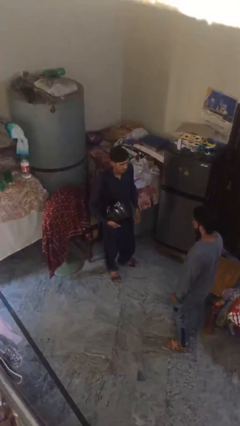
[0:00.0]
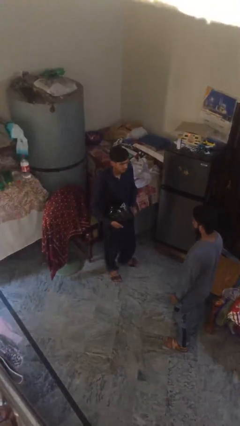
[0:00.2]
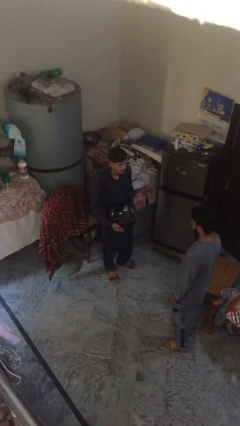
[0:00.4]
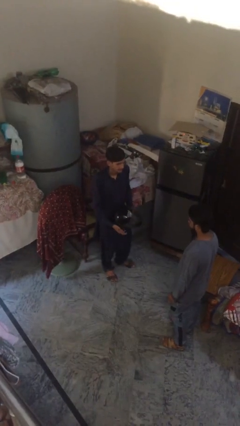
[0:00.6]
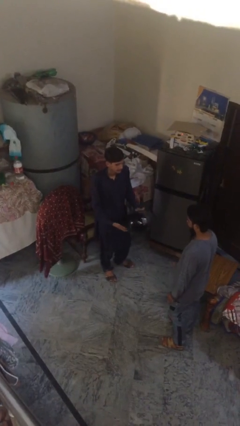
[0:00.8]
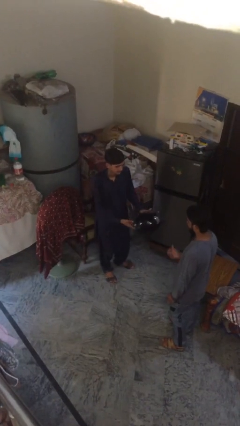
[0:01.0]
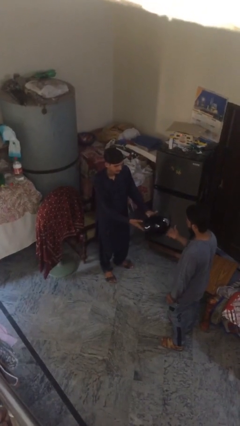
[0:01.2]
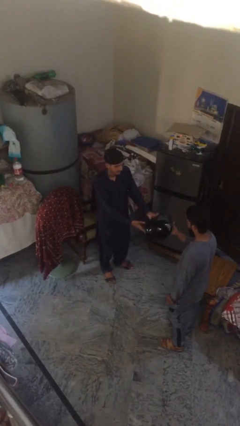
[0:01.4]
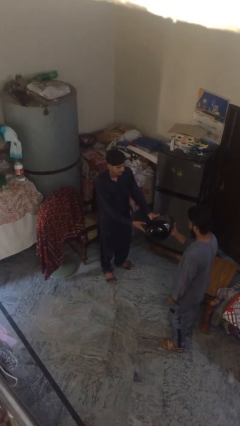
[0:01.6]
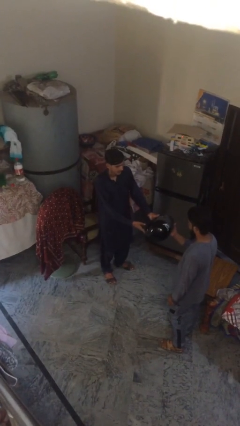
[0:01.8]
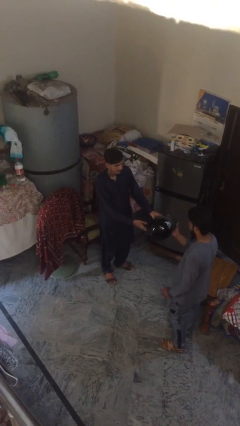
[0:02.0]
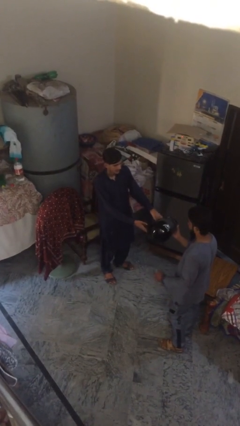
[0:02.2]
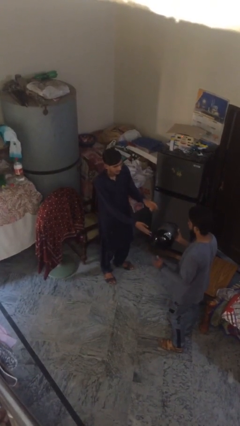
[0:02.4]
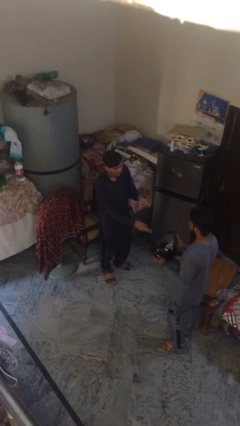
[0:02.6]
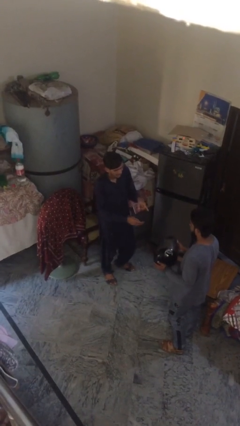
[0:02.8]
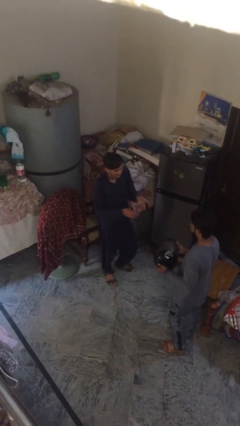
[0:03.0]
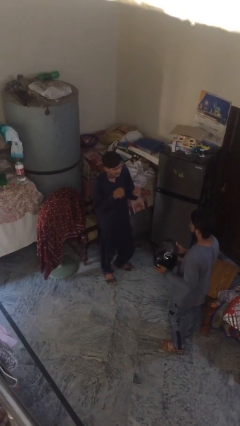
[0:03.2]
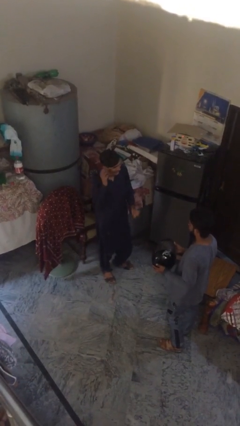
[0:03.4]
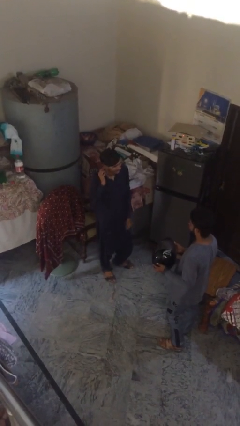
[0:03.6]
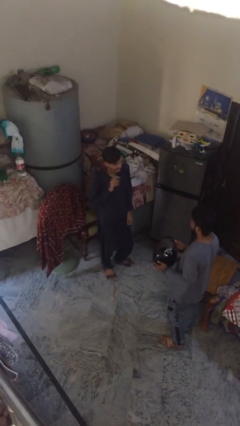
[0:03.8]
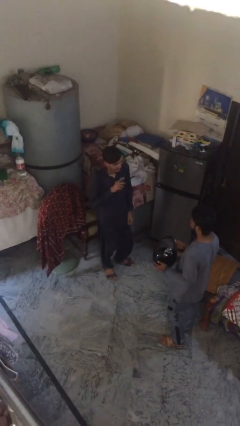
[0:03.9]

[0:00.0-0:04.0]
person transfers object to person

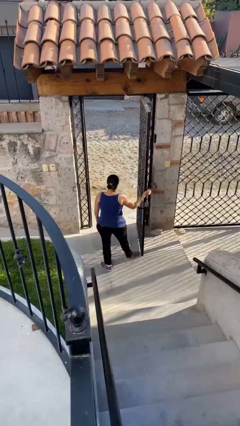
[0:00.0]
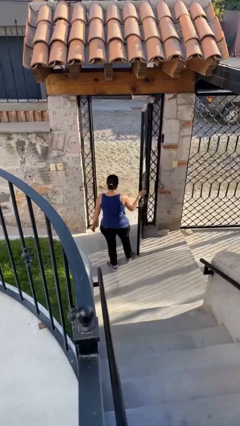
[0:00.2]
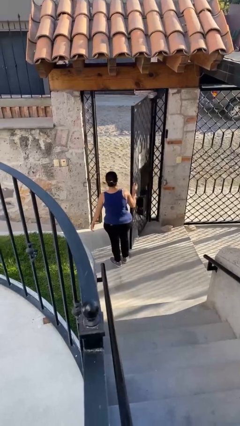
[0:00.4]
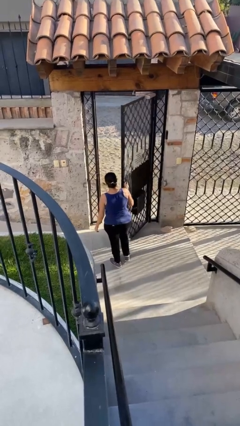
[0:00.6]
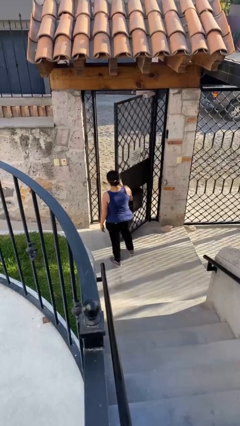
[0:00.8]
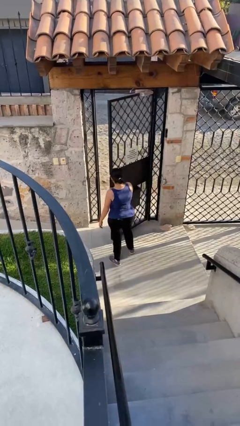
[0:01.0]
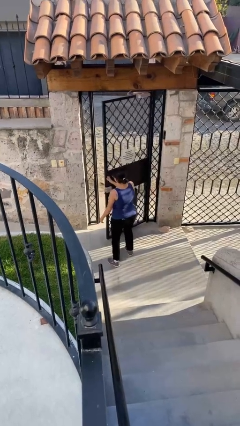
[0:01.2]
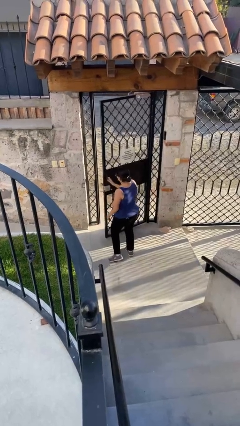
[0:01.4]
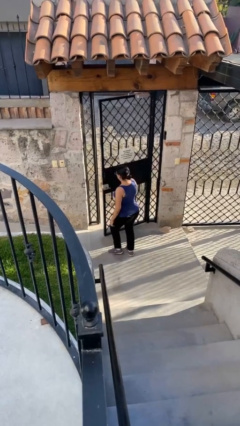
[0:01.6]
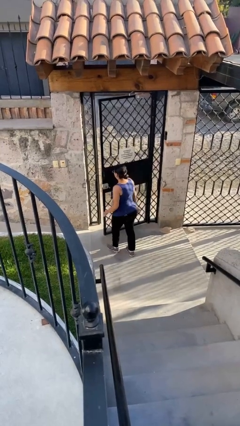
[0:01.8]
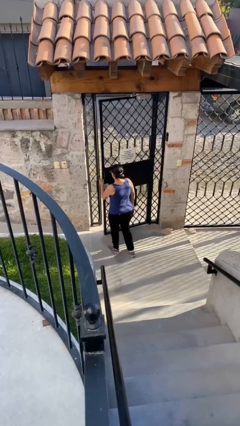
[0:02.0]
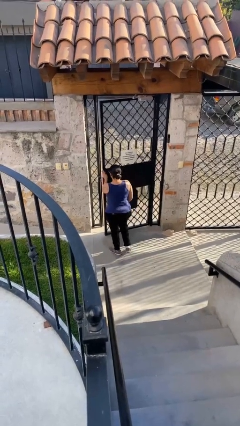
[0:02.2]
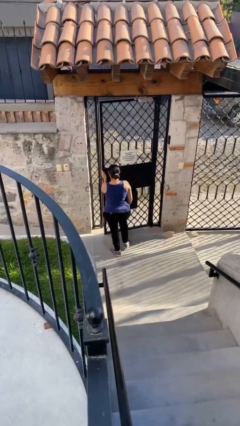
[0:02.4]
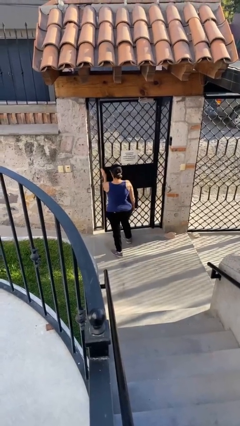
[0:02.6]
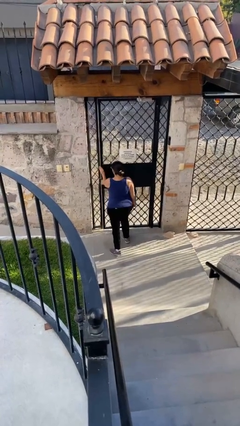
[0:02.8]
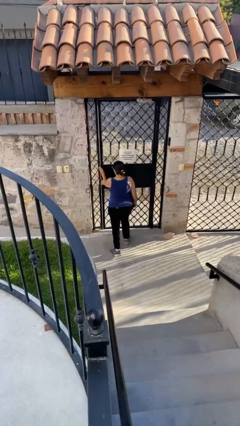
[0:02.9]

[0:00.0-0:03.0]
person closes facility door

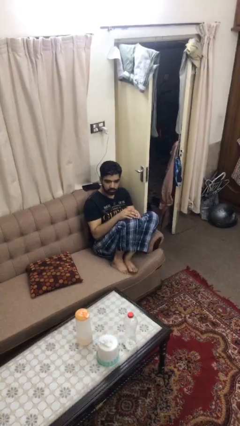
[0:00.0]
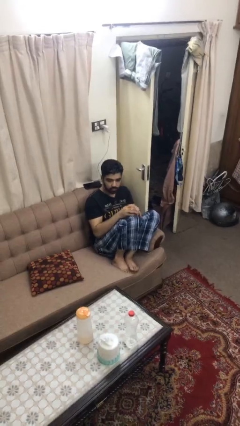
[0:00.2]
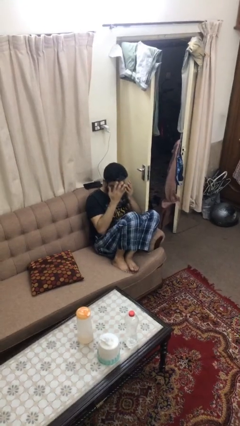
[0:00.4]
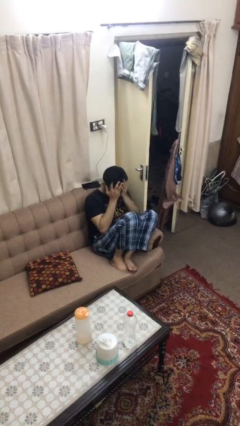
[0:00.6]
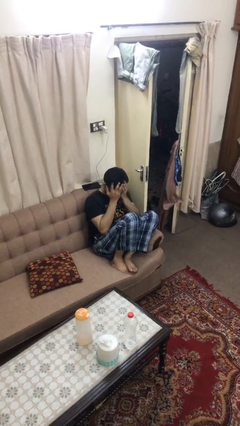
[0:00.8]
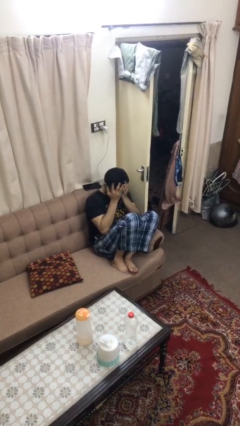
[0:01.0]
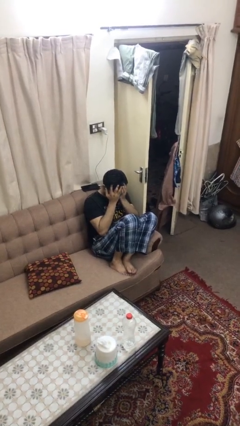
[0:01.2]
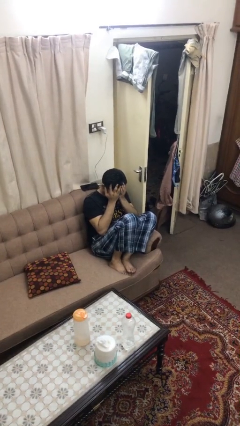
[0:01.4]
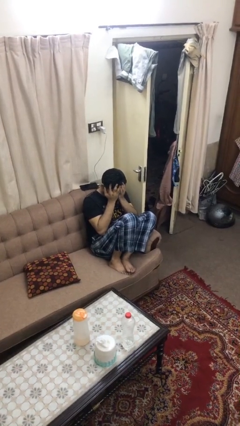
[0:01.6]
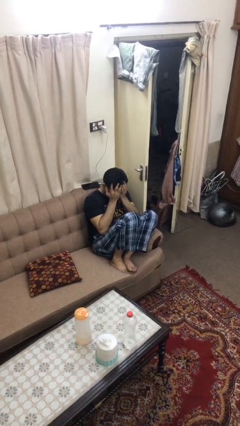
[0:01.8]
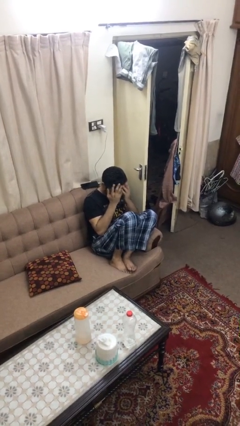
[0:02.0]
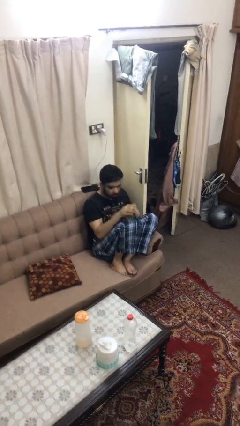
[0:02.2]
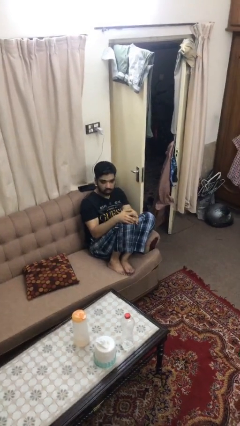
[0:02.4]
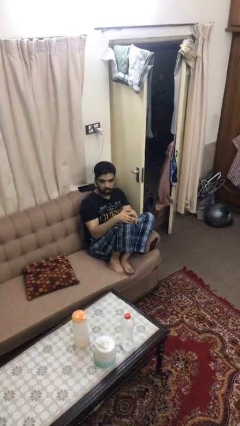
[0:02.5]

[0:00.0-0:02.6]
person covers face with hands

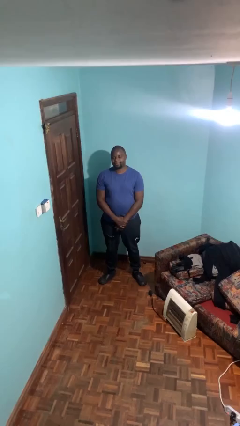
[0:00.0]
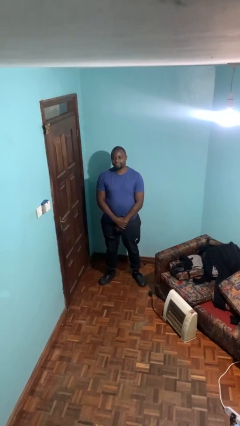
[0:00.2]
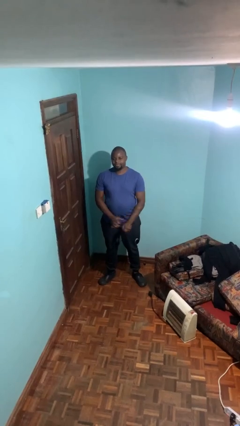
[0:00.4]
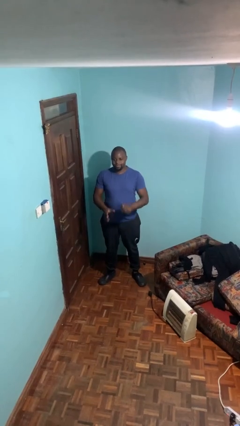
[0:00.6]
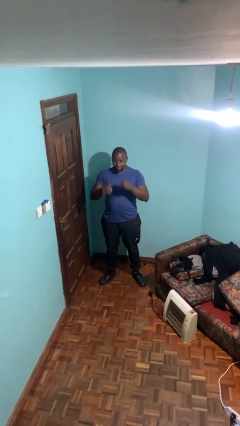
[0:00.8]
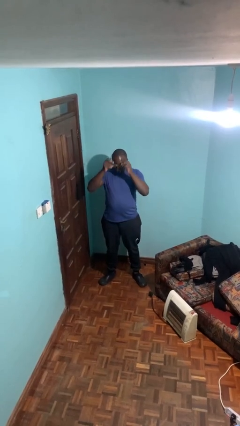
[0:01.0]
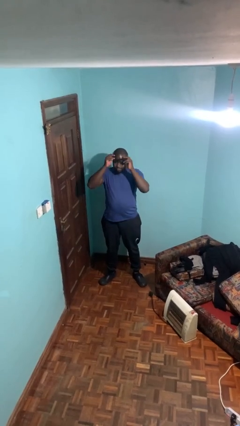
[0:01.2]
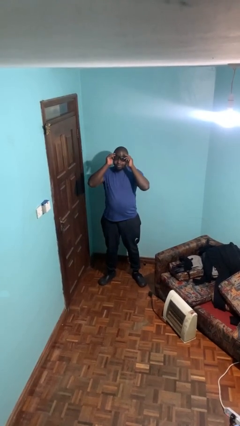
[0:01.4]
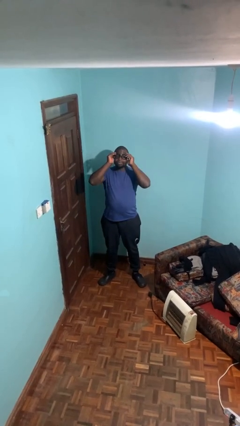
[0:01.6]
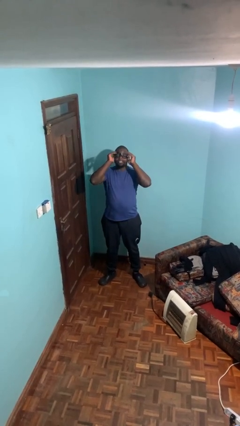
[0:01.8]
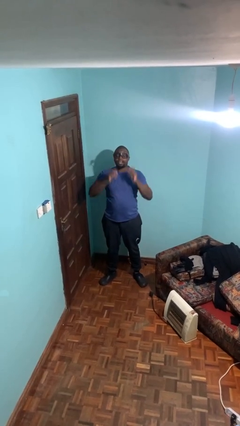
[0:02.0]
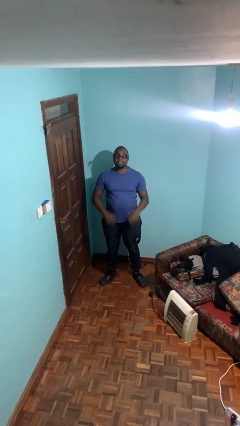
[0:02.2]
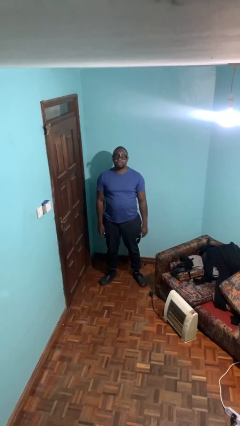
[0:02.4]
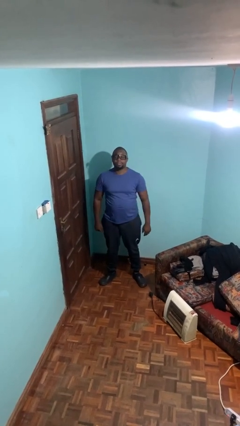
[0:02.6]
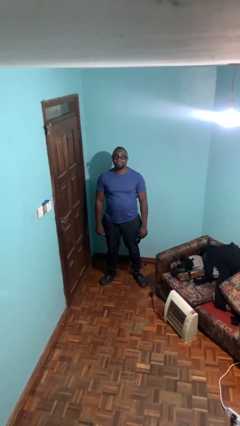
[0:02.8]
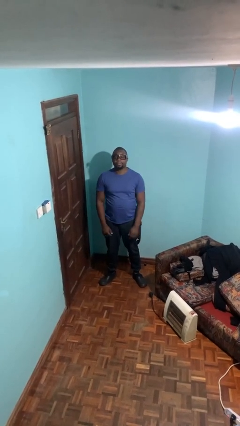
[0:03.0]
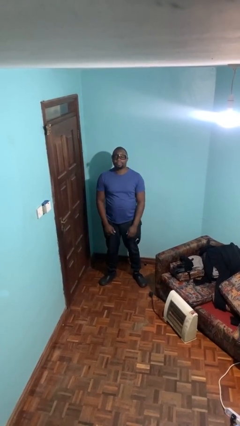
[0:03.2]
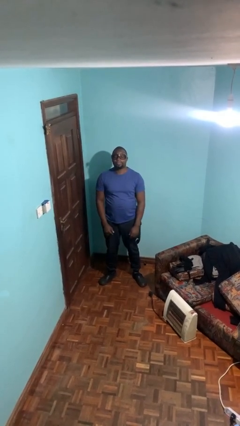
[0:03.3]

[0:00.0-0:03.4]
person puts on glasses

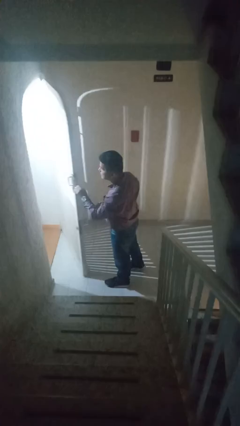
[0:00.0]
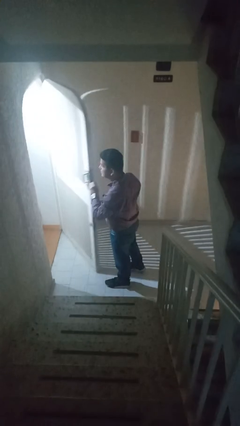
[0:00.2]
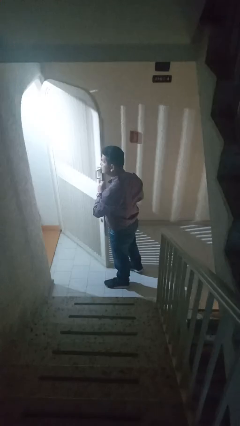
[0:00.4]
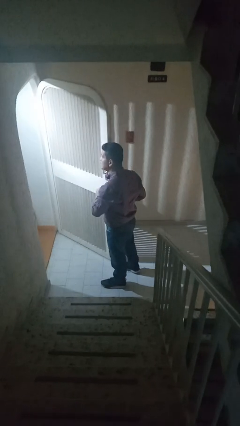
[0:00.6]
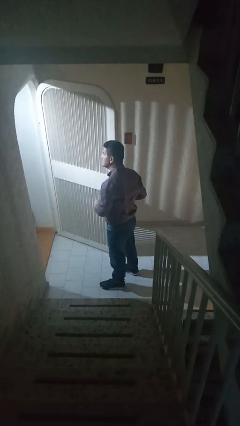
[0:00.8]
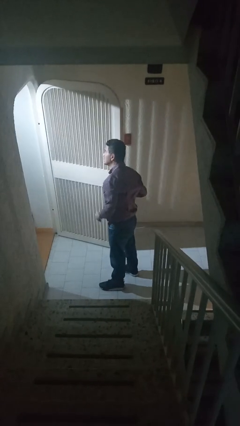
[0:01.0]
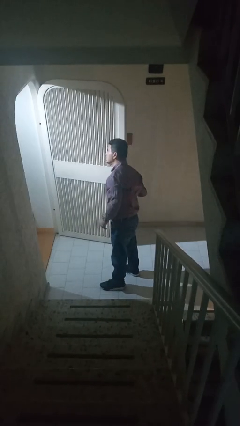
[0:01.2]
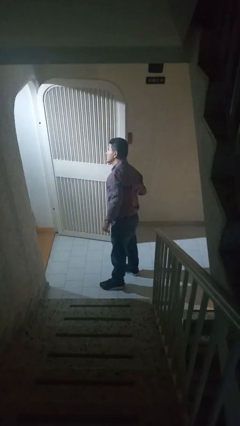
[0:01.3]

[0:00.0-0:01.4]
person opens facility door

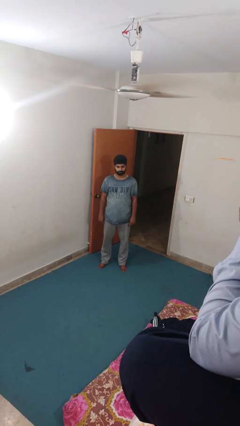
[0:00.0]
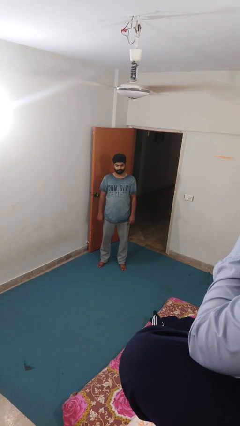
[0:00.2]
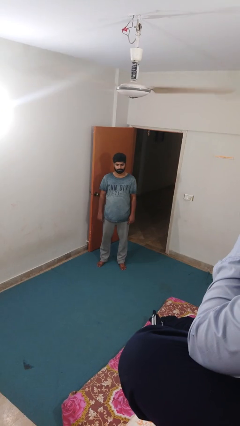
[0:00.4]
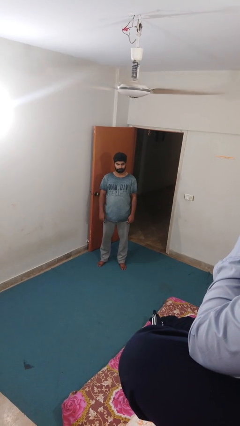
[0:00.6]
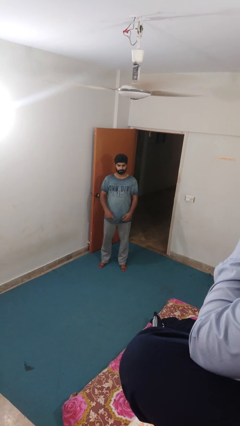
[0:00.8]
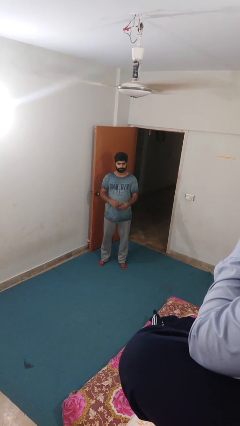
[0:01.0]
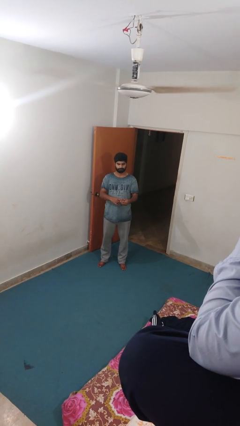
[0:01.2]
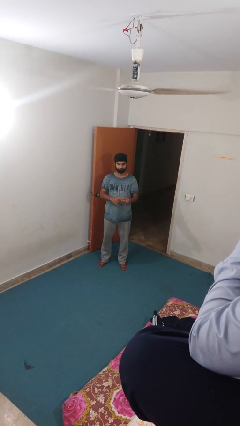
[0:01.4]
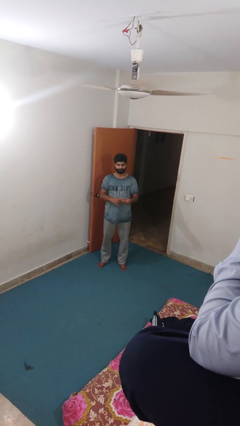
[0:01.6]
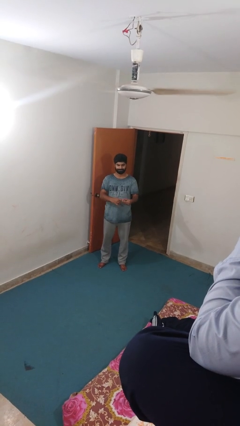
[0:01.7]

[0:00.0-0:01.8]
person takes off ring

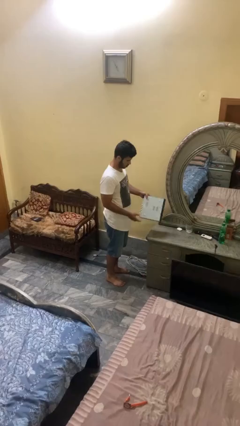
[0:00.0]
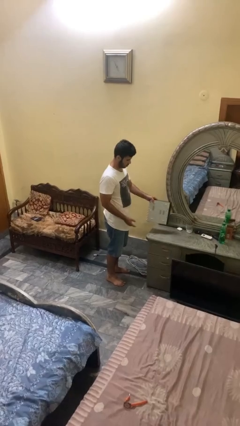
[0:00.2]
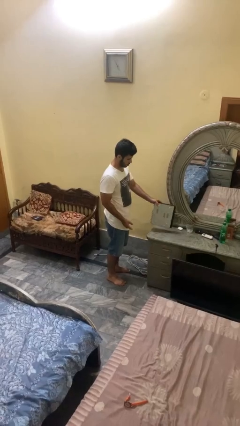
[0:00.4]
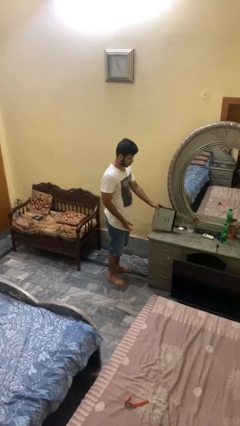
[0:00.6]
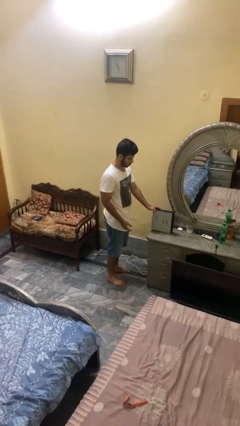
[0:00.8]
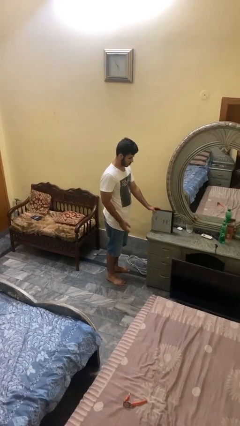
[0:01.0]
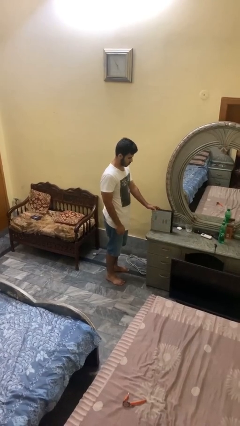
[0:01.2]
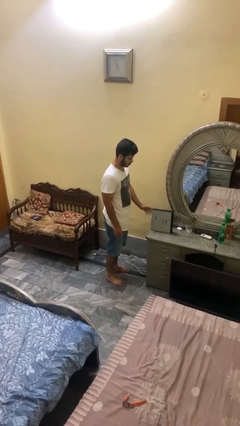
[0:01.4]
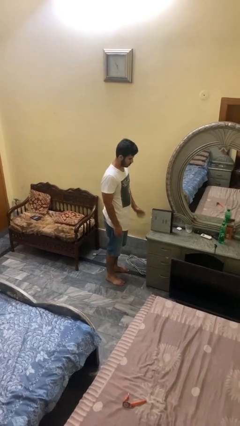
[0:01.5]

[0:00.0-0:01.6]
person puts down object on countertop
